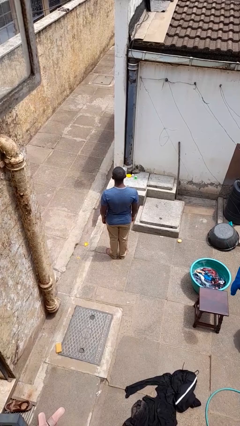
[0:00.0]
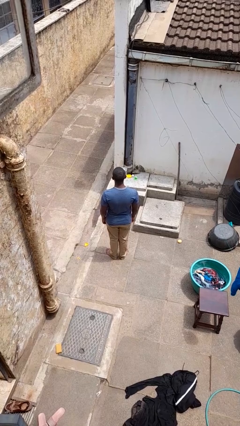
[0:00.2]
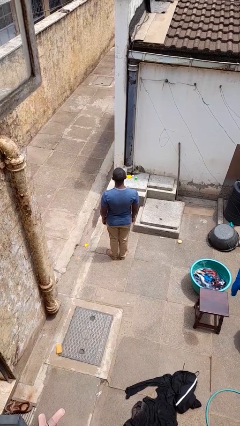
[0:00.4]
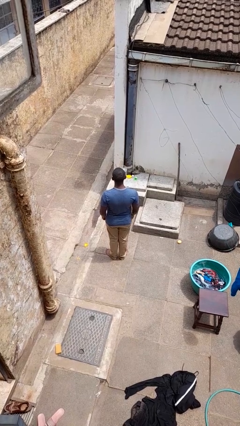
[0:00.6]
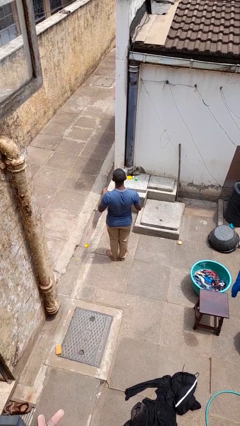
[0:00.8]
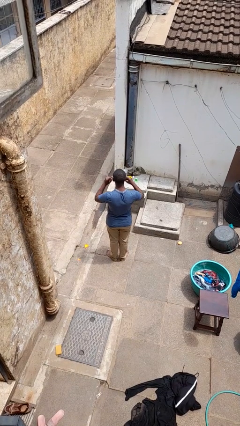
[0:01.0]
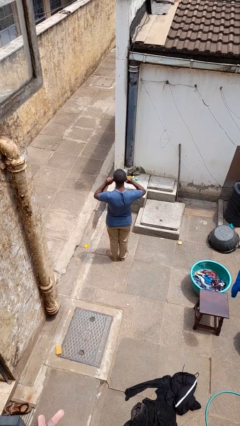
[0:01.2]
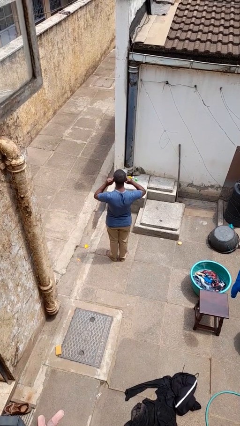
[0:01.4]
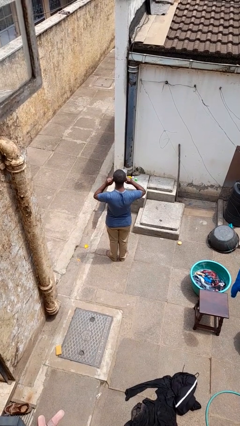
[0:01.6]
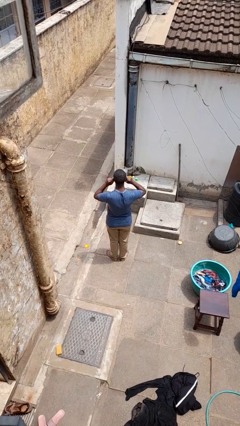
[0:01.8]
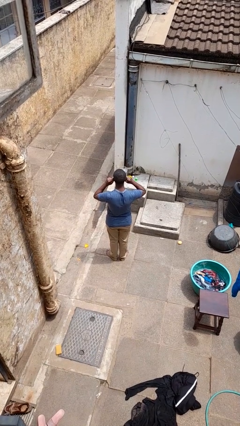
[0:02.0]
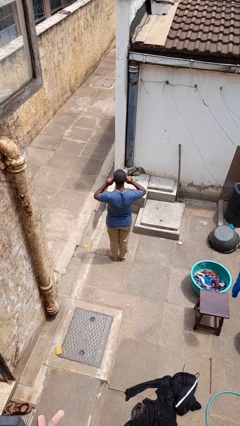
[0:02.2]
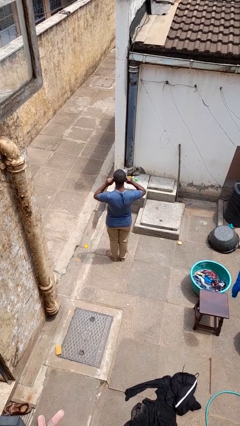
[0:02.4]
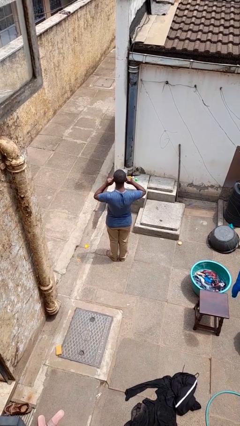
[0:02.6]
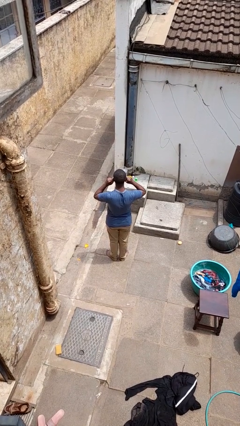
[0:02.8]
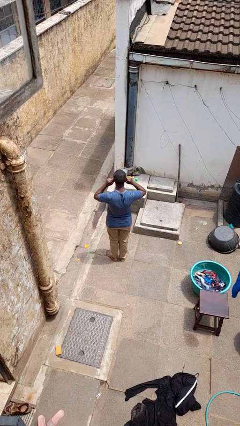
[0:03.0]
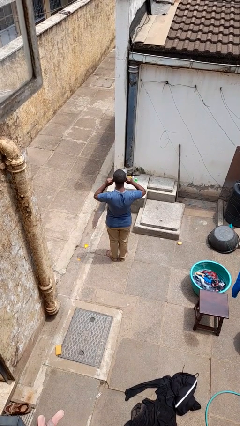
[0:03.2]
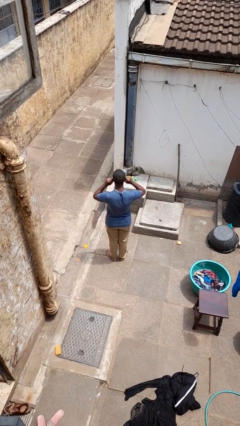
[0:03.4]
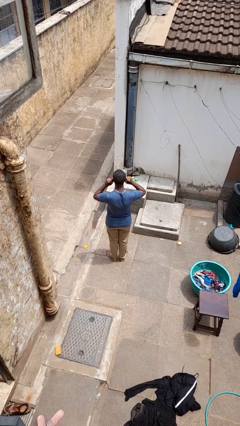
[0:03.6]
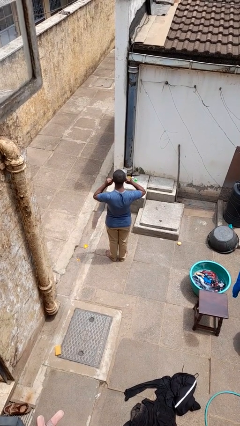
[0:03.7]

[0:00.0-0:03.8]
person puts fingers in ear

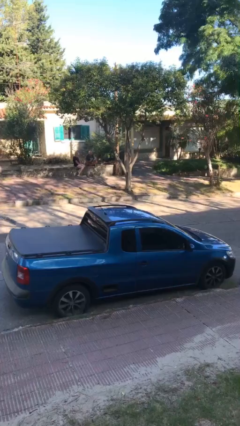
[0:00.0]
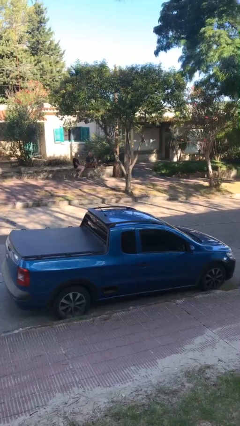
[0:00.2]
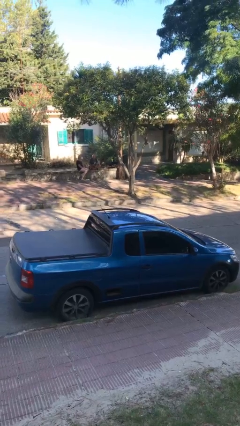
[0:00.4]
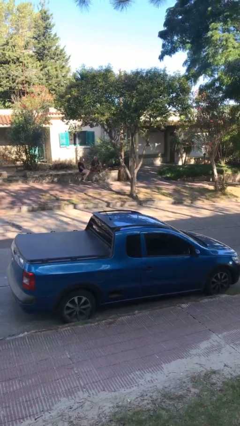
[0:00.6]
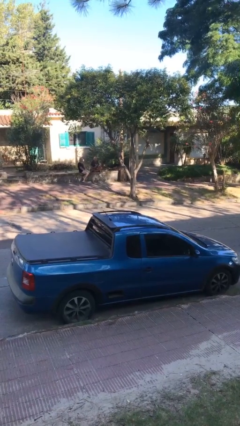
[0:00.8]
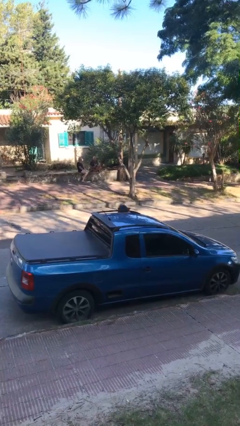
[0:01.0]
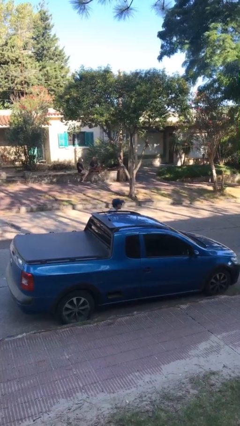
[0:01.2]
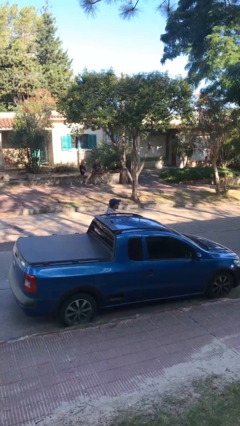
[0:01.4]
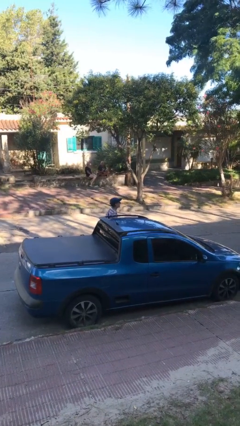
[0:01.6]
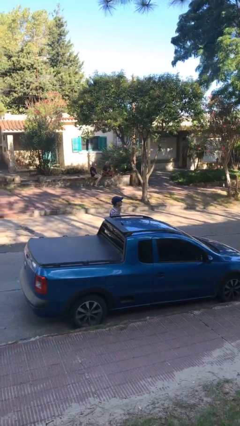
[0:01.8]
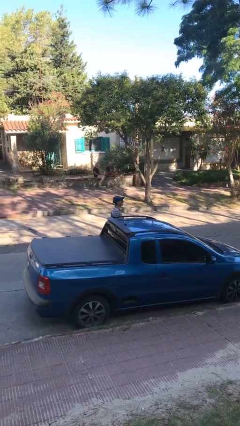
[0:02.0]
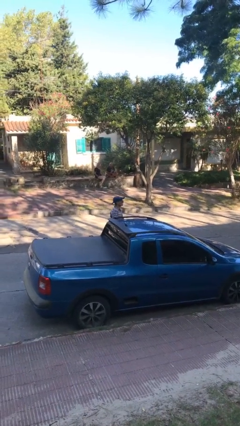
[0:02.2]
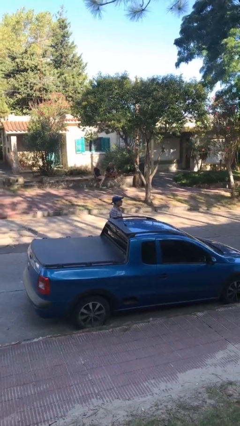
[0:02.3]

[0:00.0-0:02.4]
person exits car

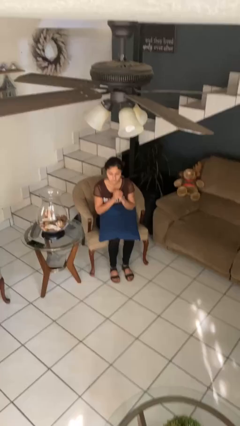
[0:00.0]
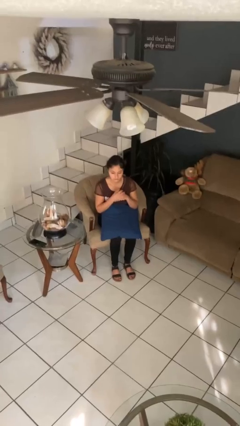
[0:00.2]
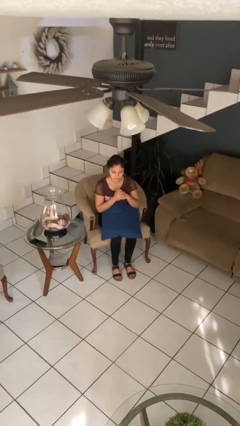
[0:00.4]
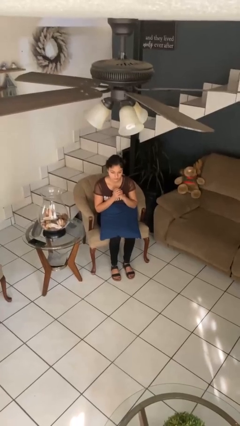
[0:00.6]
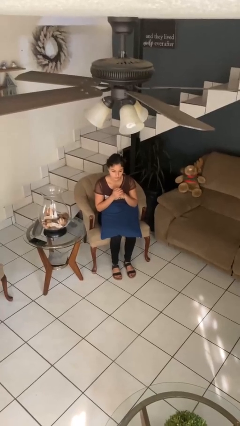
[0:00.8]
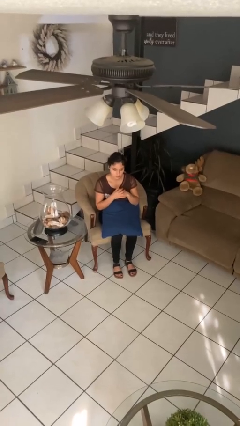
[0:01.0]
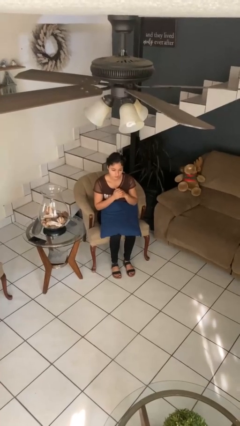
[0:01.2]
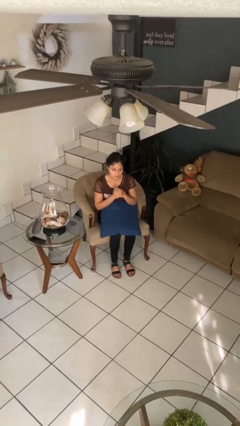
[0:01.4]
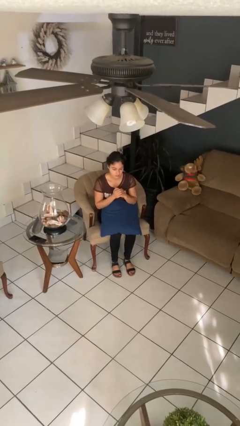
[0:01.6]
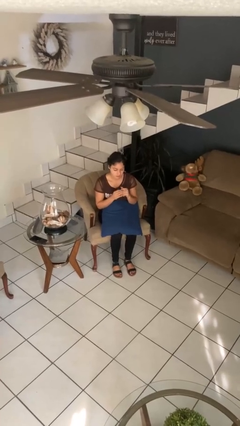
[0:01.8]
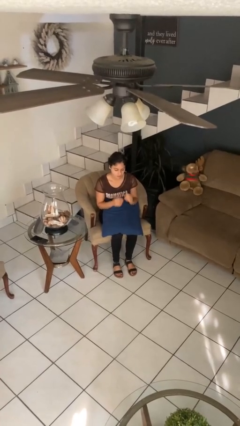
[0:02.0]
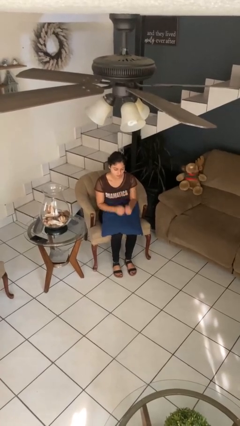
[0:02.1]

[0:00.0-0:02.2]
person cracks knuckles

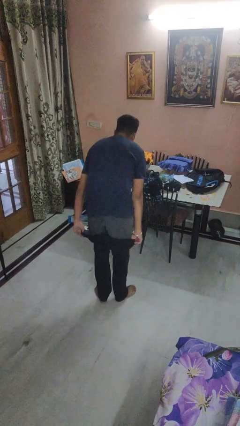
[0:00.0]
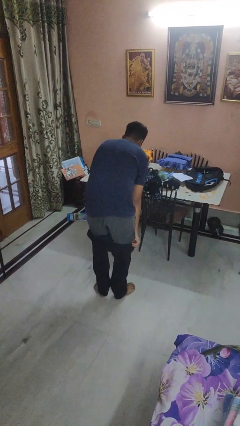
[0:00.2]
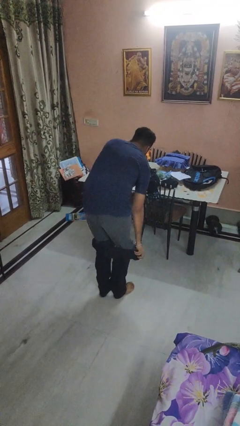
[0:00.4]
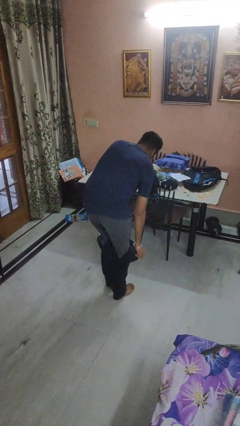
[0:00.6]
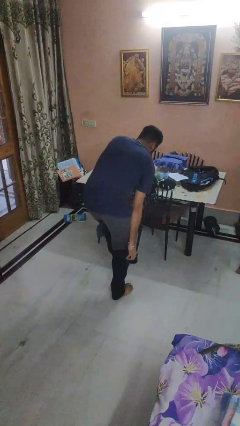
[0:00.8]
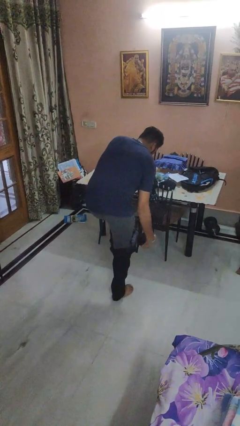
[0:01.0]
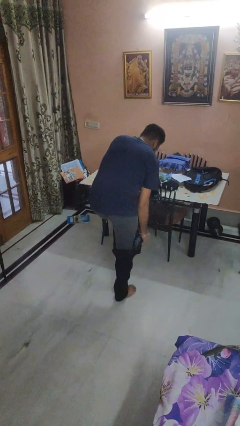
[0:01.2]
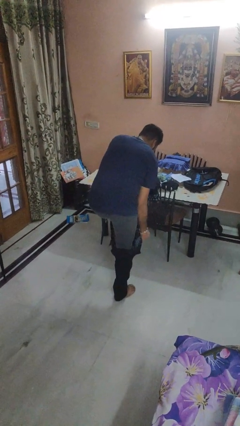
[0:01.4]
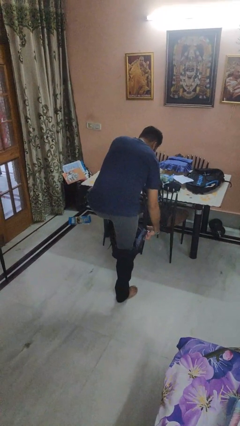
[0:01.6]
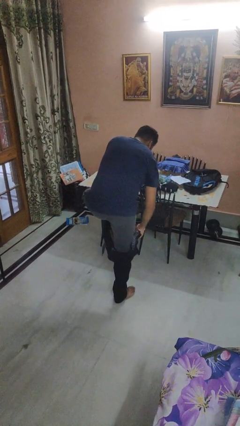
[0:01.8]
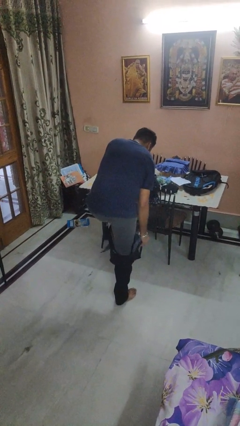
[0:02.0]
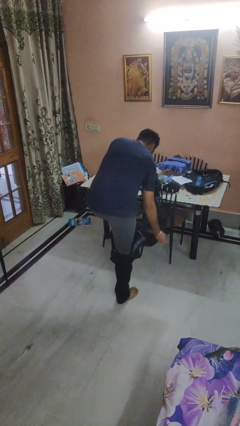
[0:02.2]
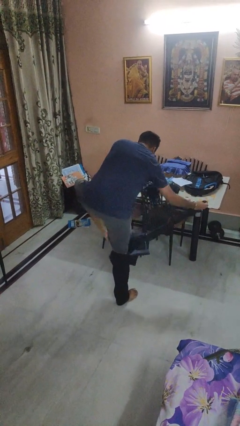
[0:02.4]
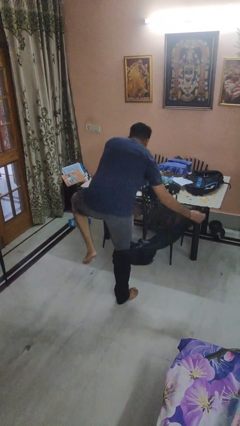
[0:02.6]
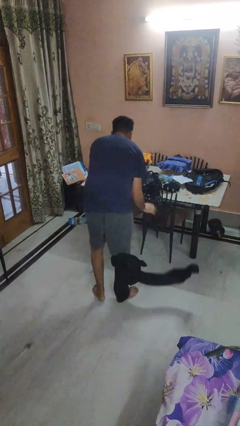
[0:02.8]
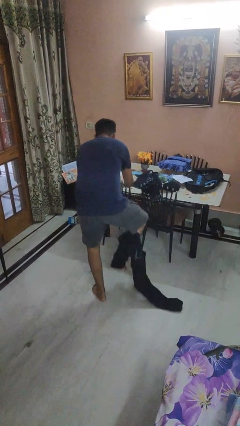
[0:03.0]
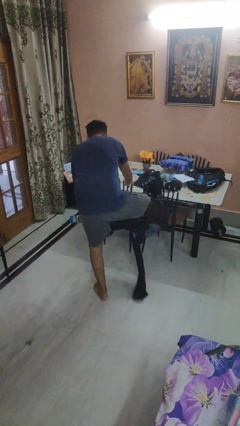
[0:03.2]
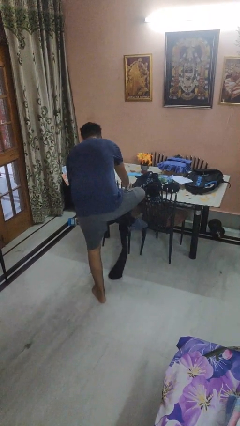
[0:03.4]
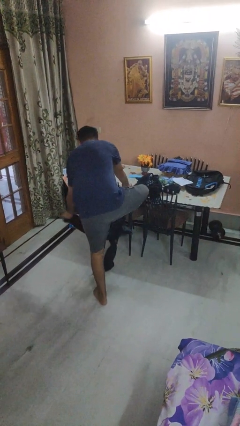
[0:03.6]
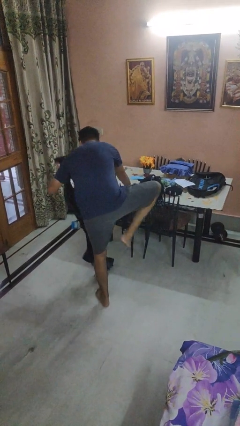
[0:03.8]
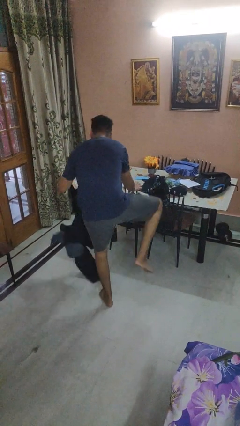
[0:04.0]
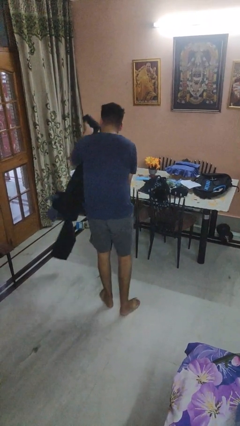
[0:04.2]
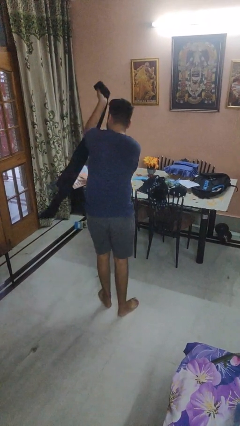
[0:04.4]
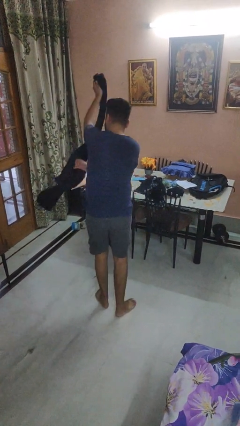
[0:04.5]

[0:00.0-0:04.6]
person takes off pants

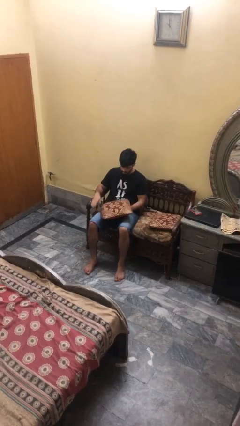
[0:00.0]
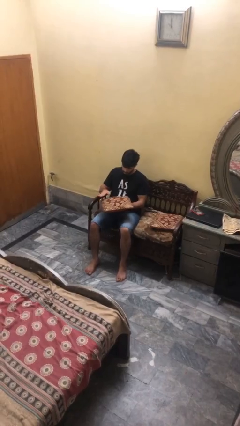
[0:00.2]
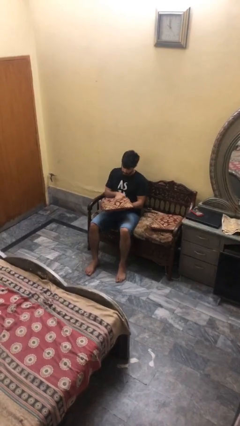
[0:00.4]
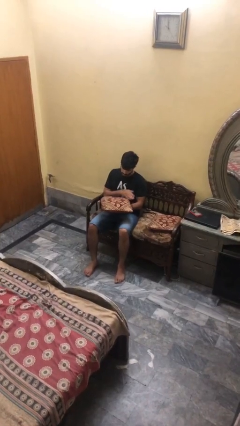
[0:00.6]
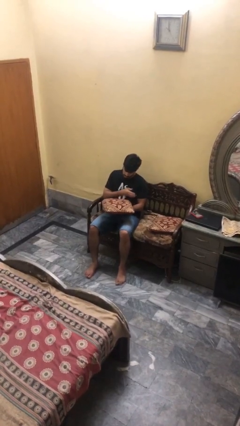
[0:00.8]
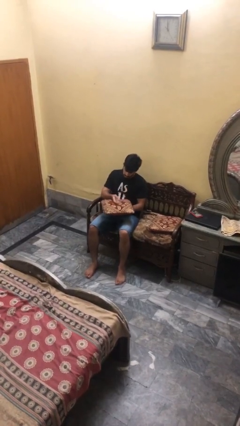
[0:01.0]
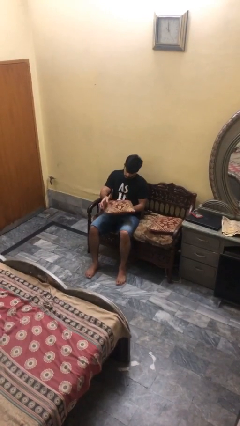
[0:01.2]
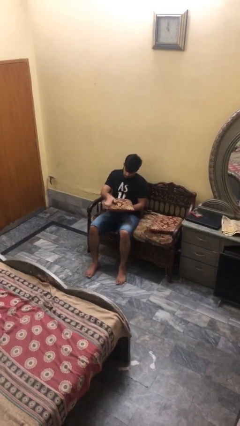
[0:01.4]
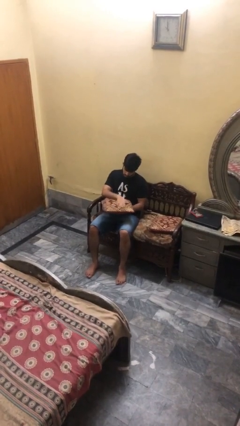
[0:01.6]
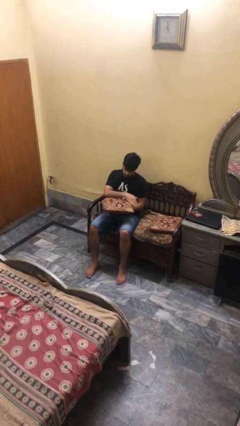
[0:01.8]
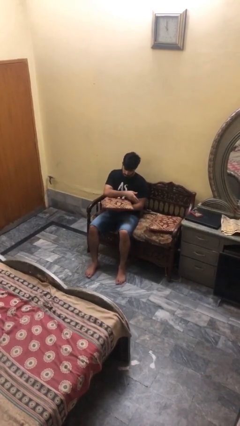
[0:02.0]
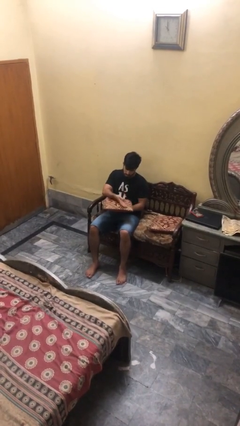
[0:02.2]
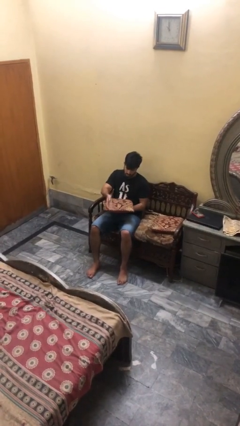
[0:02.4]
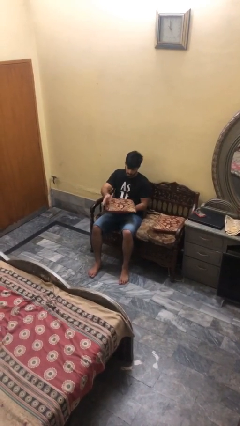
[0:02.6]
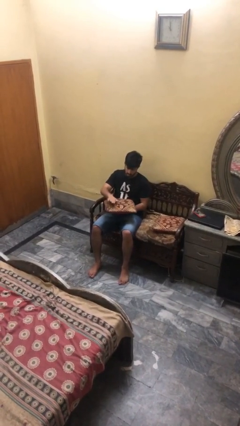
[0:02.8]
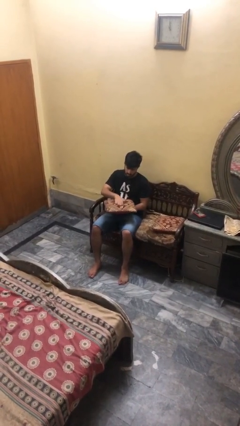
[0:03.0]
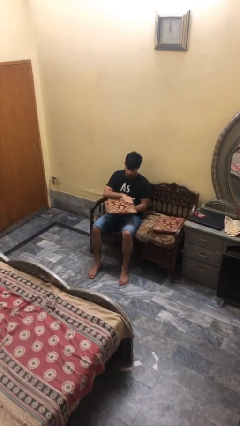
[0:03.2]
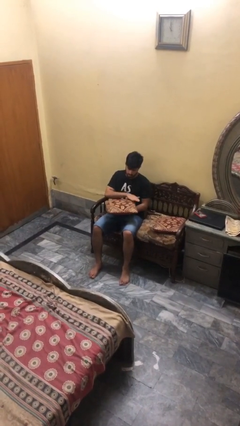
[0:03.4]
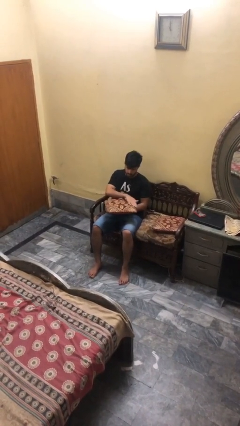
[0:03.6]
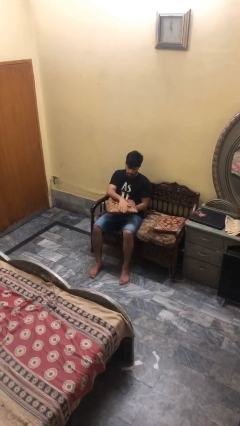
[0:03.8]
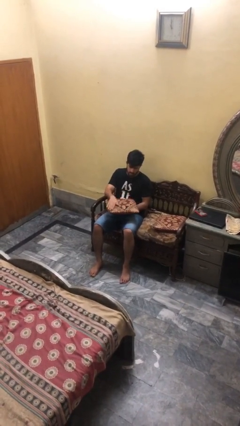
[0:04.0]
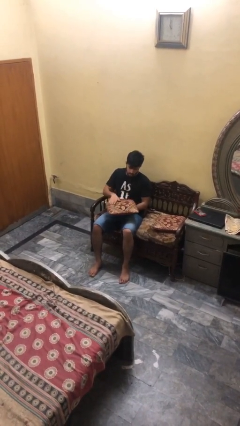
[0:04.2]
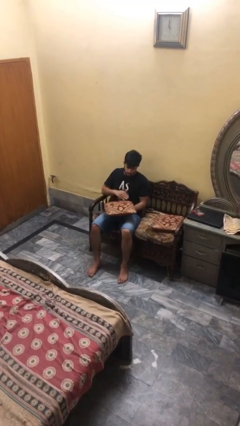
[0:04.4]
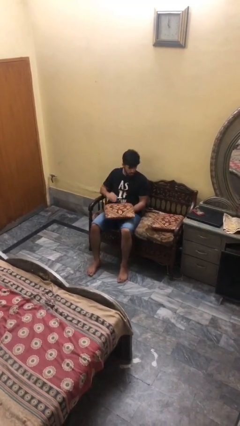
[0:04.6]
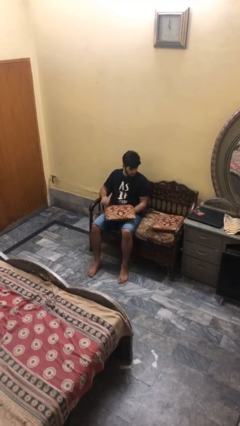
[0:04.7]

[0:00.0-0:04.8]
person waves hand over object
